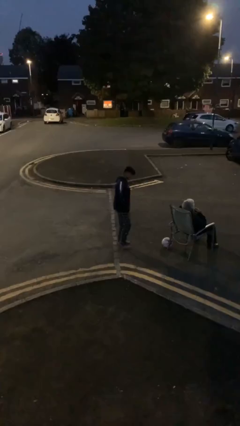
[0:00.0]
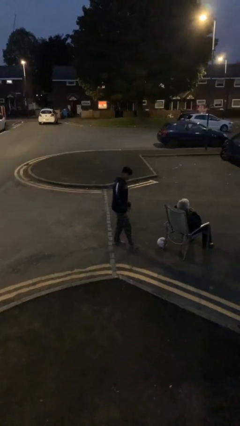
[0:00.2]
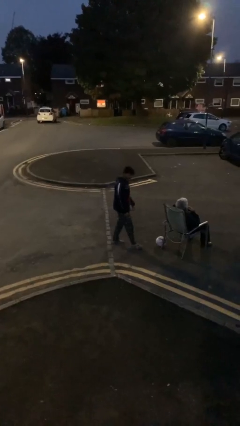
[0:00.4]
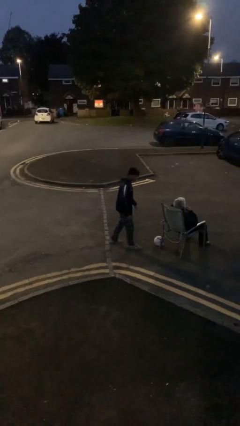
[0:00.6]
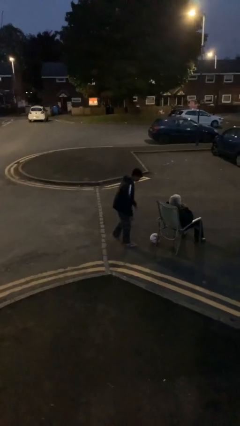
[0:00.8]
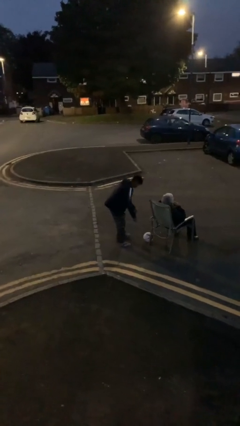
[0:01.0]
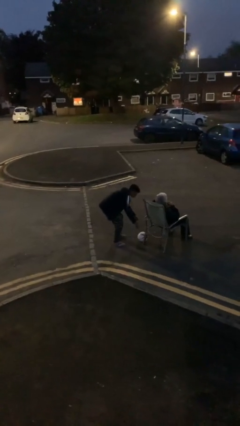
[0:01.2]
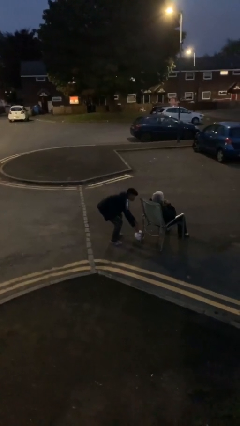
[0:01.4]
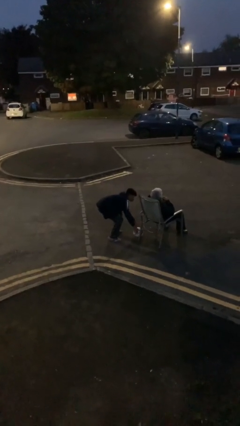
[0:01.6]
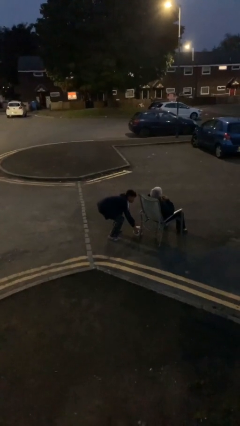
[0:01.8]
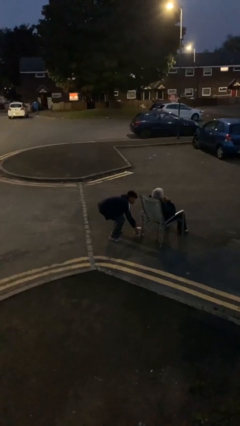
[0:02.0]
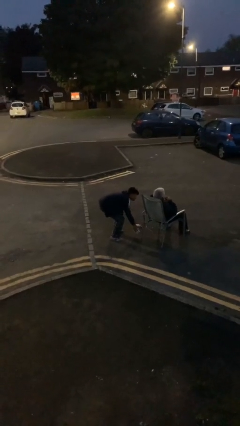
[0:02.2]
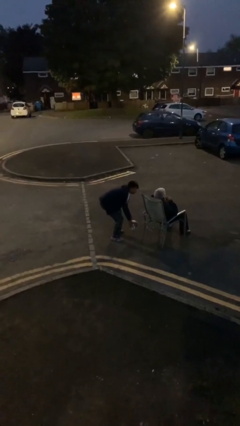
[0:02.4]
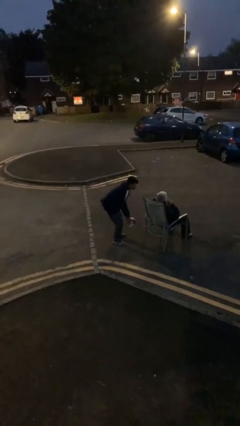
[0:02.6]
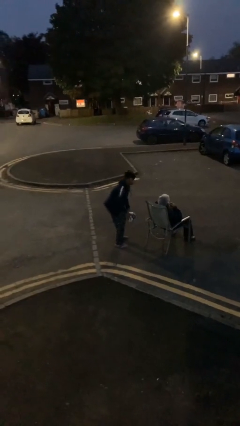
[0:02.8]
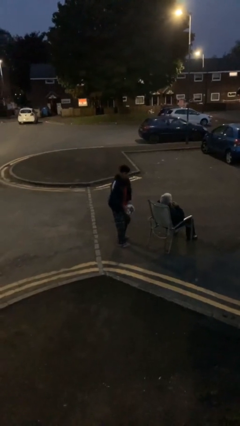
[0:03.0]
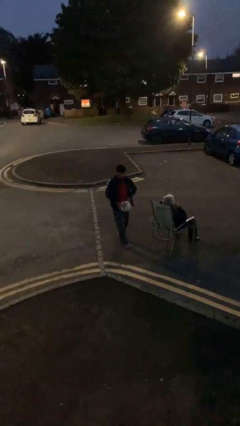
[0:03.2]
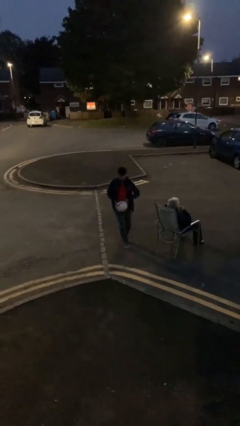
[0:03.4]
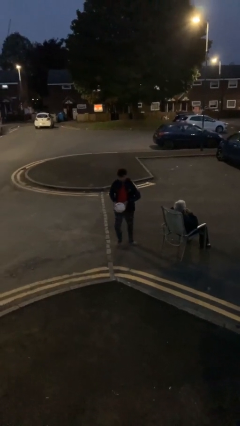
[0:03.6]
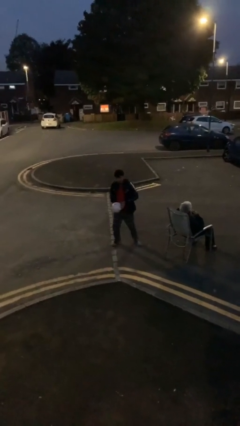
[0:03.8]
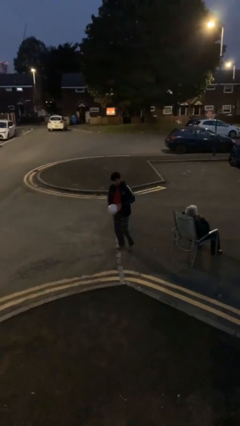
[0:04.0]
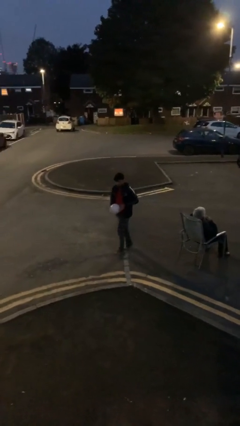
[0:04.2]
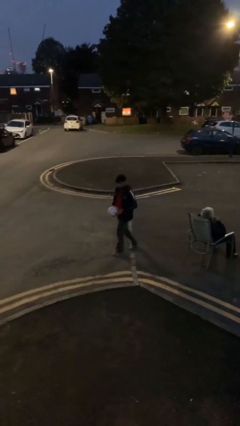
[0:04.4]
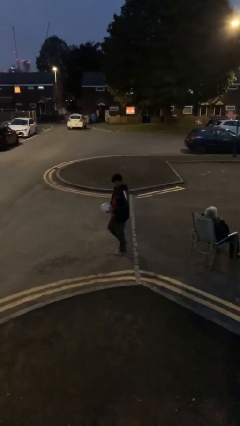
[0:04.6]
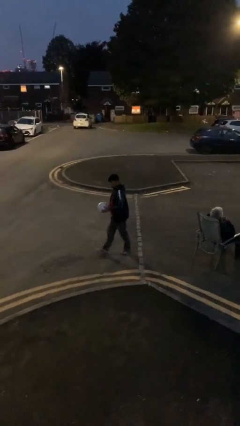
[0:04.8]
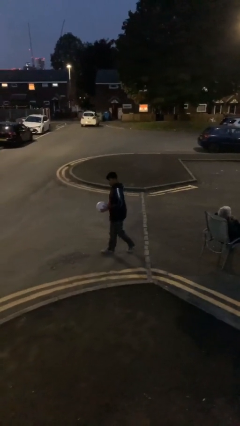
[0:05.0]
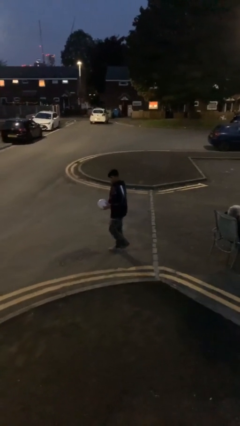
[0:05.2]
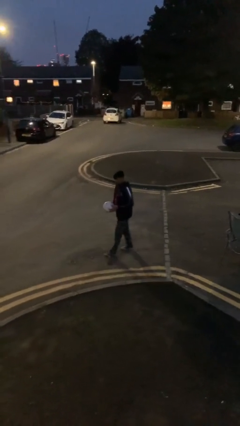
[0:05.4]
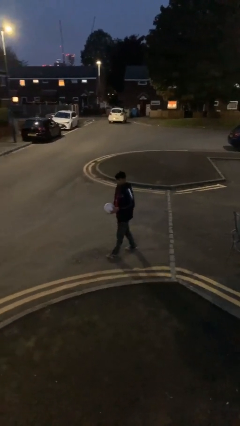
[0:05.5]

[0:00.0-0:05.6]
person steals object from person

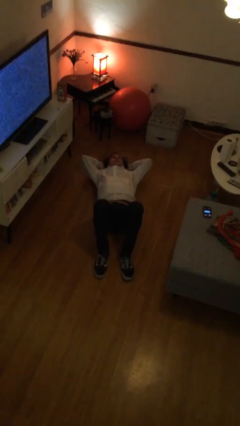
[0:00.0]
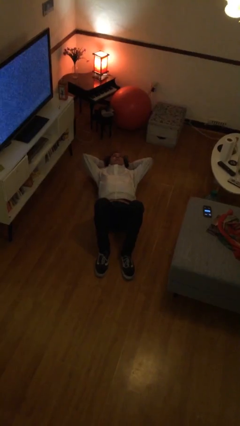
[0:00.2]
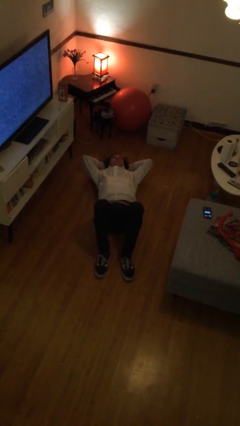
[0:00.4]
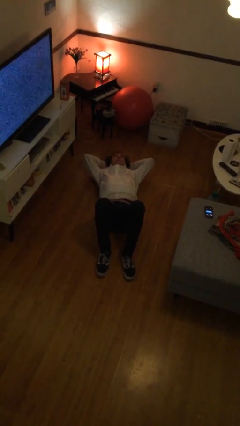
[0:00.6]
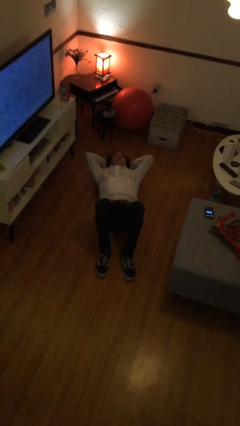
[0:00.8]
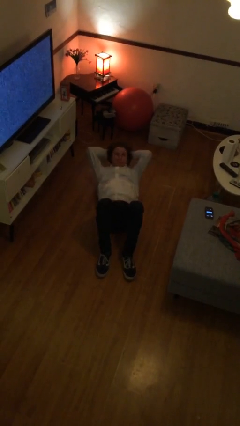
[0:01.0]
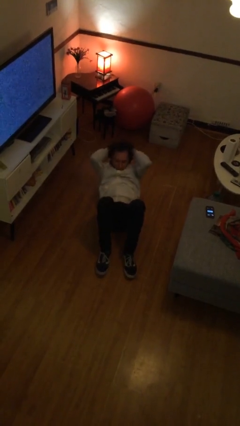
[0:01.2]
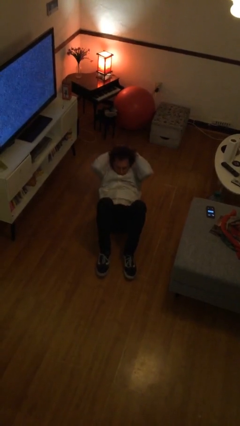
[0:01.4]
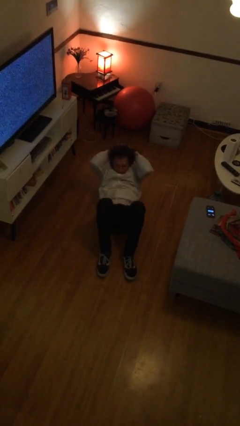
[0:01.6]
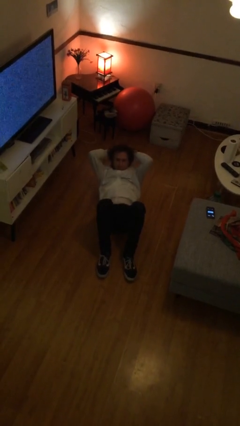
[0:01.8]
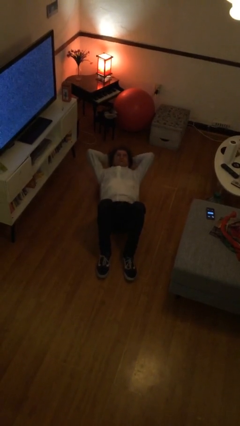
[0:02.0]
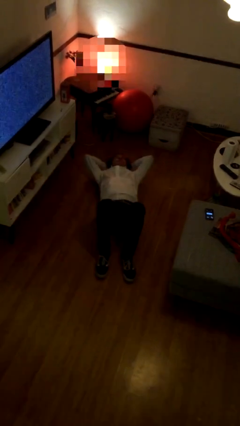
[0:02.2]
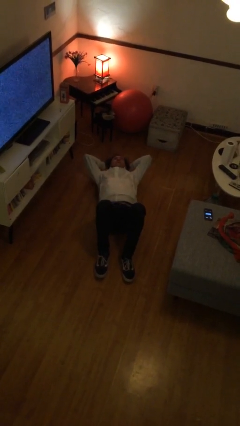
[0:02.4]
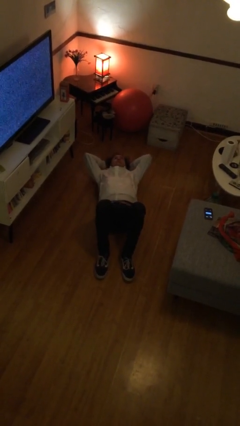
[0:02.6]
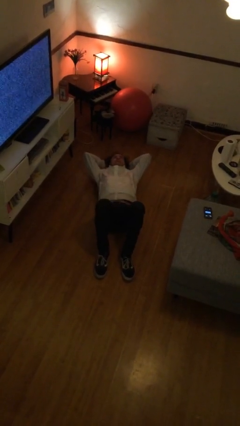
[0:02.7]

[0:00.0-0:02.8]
person exercises with situp

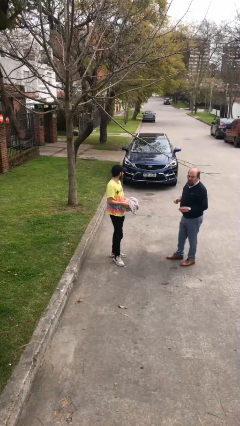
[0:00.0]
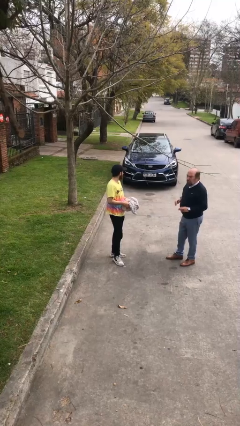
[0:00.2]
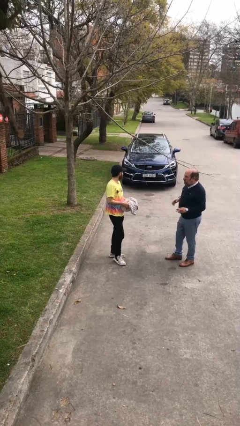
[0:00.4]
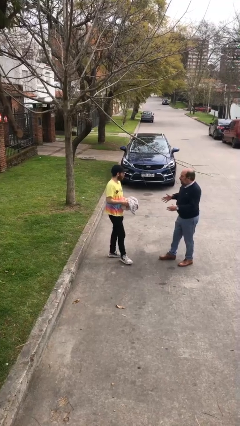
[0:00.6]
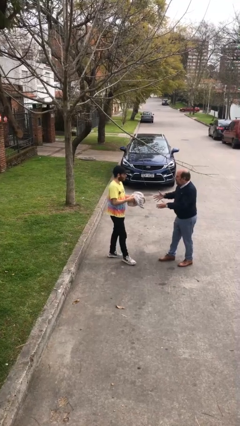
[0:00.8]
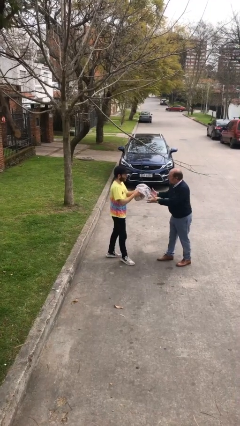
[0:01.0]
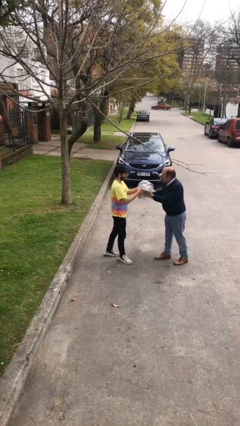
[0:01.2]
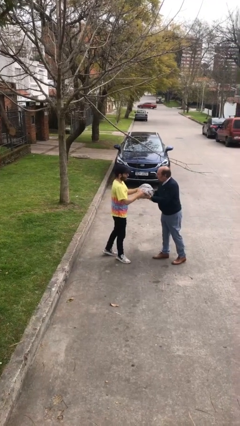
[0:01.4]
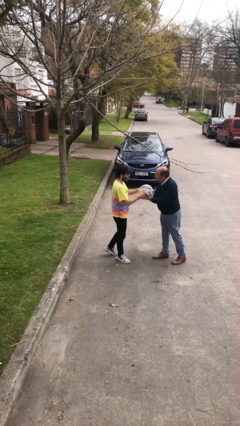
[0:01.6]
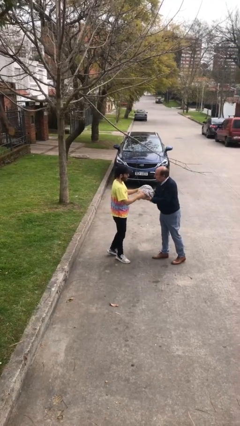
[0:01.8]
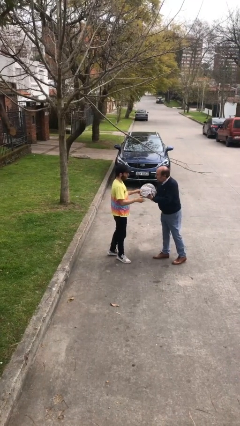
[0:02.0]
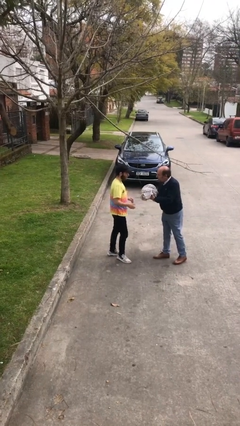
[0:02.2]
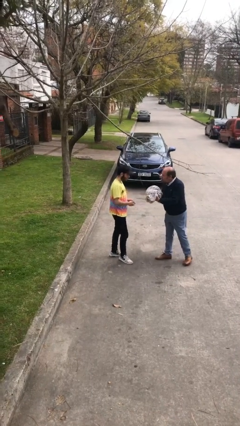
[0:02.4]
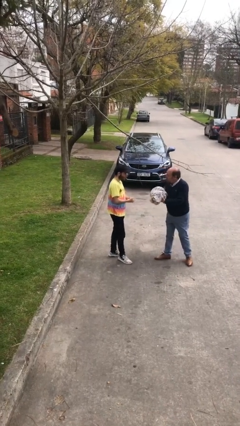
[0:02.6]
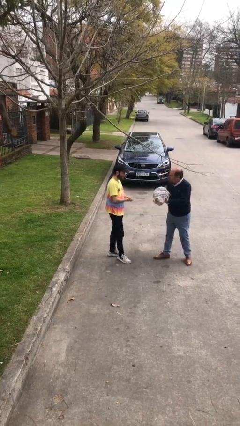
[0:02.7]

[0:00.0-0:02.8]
person transfers object to person

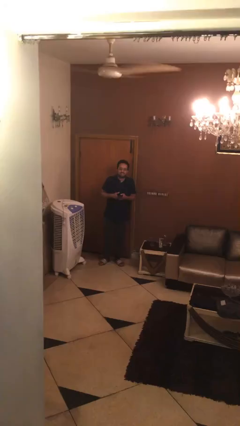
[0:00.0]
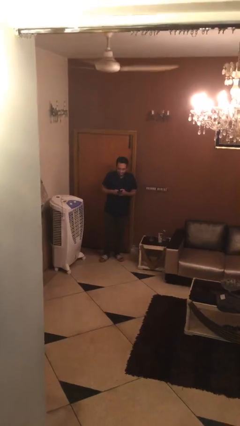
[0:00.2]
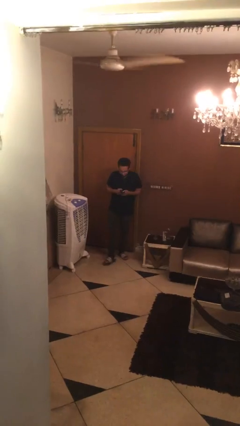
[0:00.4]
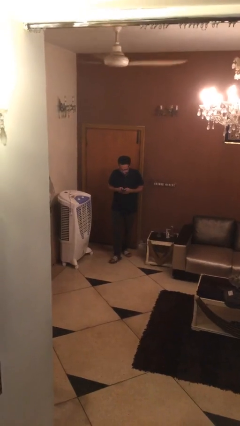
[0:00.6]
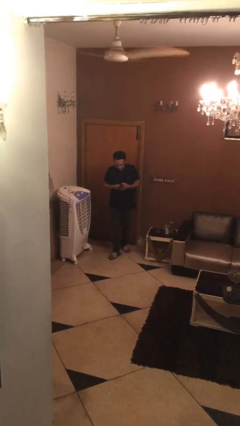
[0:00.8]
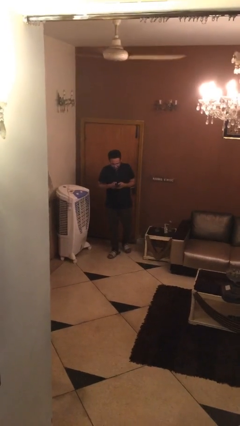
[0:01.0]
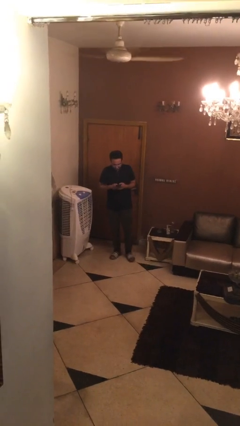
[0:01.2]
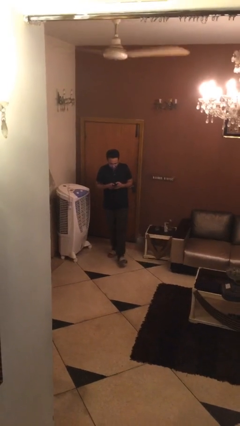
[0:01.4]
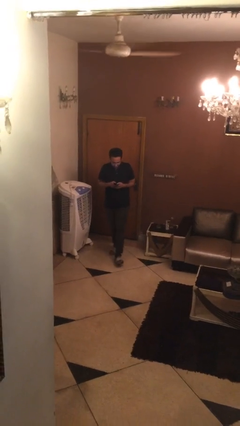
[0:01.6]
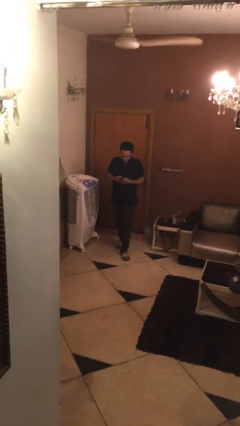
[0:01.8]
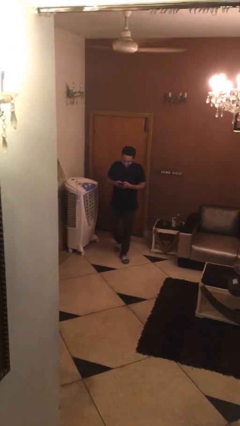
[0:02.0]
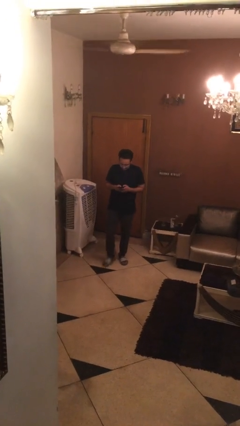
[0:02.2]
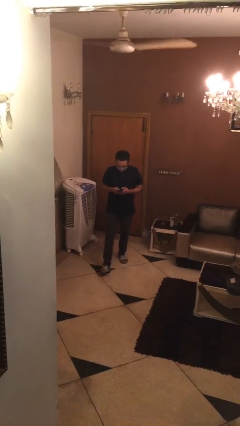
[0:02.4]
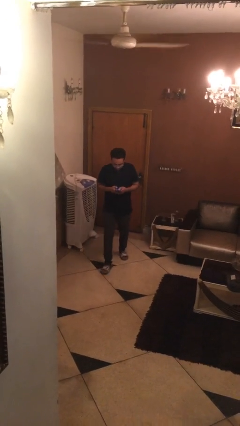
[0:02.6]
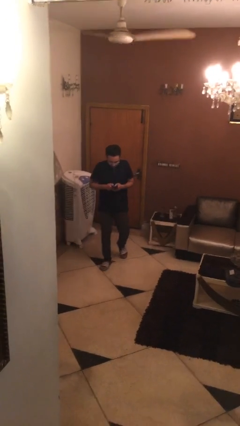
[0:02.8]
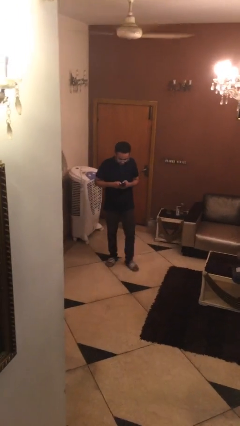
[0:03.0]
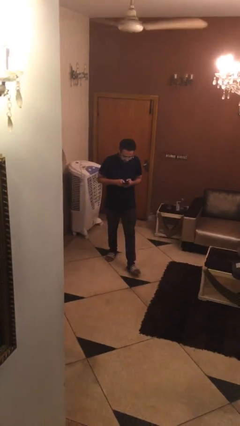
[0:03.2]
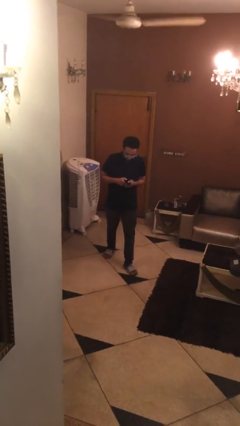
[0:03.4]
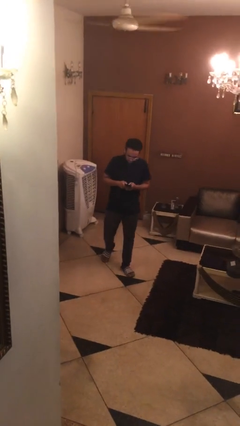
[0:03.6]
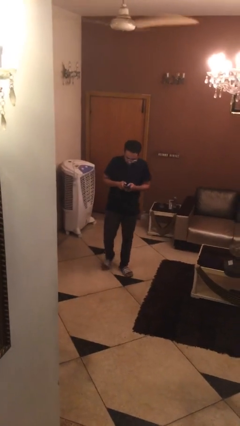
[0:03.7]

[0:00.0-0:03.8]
person texts on phone

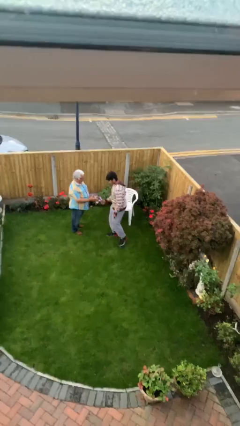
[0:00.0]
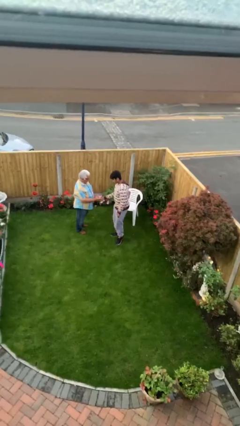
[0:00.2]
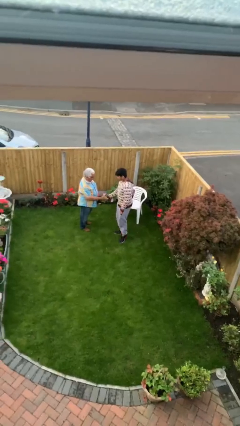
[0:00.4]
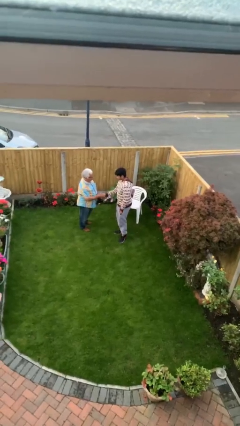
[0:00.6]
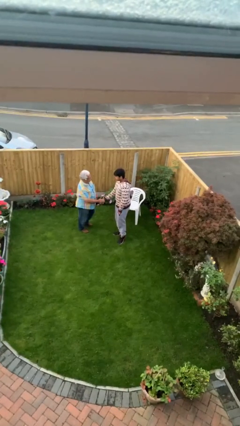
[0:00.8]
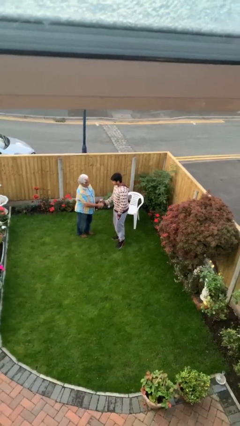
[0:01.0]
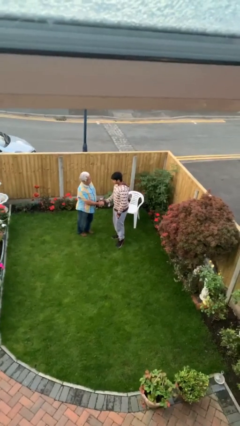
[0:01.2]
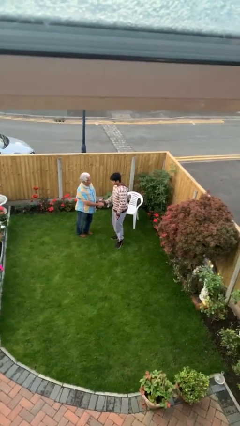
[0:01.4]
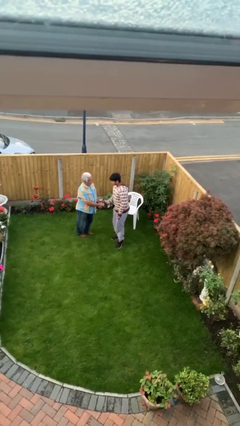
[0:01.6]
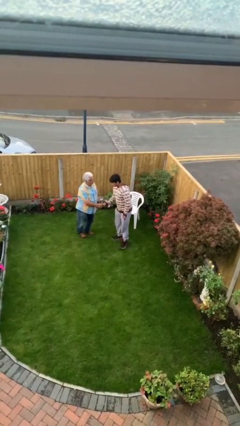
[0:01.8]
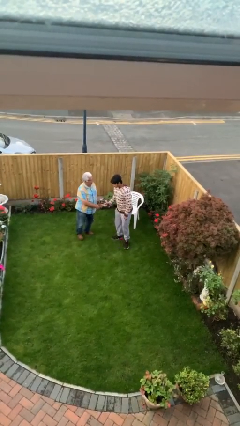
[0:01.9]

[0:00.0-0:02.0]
person shakes hand

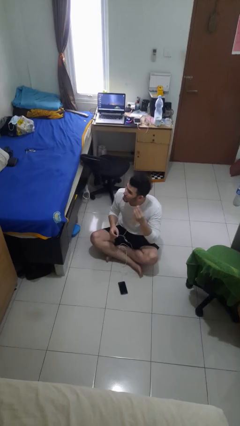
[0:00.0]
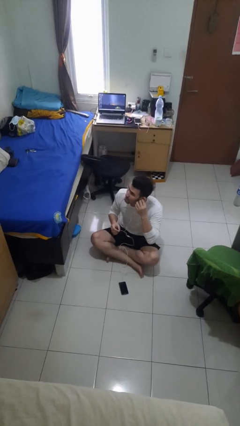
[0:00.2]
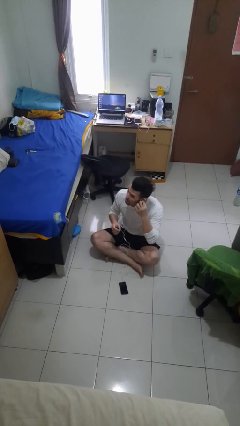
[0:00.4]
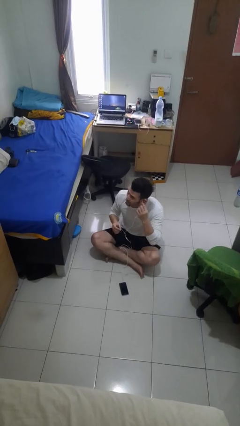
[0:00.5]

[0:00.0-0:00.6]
person takes off headphones
